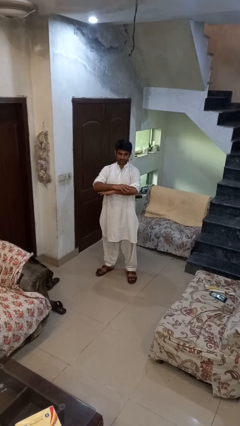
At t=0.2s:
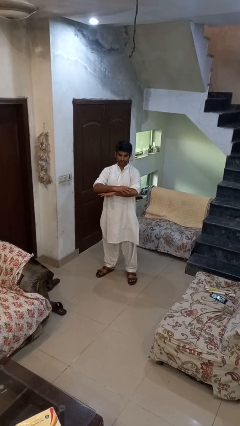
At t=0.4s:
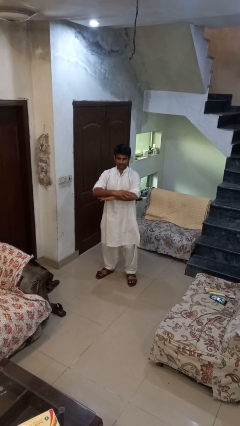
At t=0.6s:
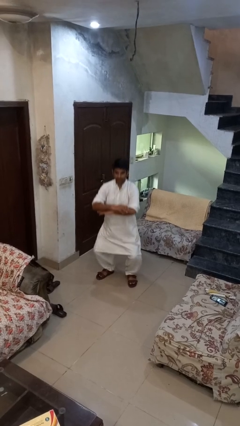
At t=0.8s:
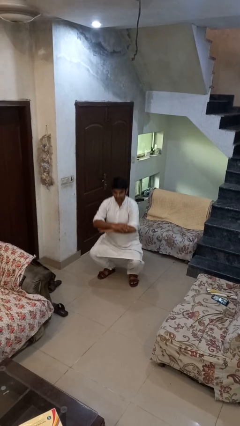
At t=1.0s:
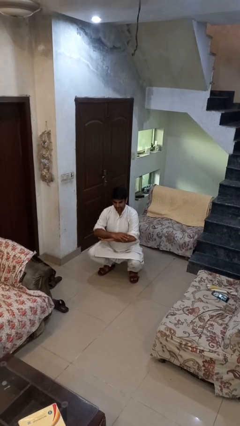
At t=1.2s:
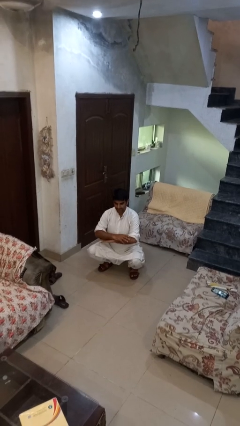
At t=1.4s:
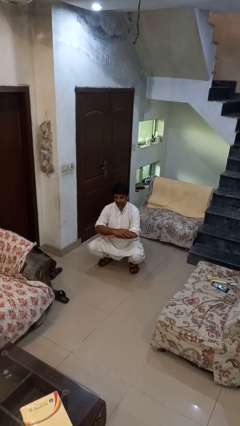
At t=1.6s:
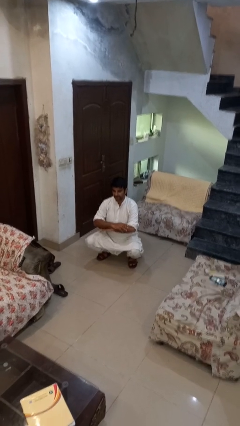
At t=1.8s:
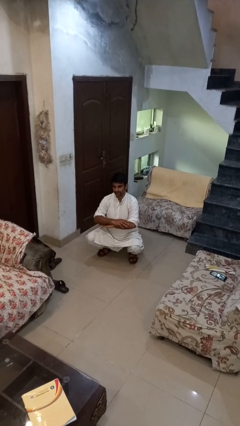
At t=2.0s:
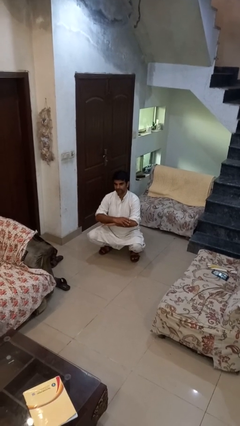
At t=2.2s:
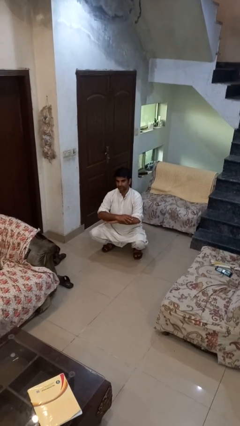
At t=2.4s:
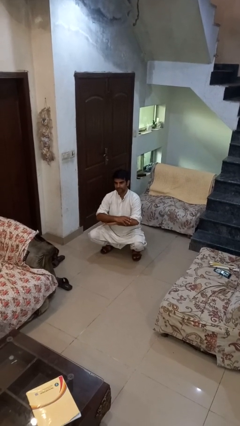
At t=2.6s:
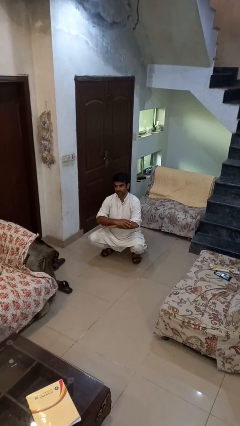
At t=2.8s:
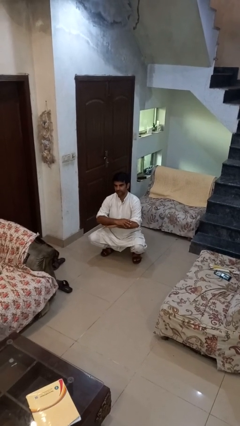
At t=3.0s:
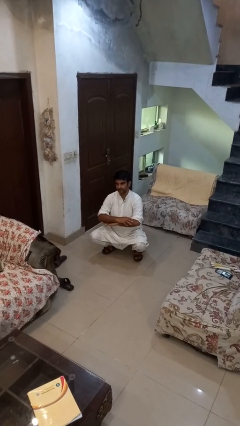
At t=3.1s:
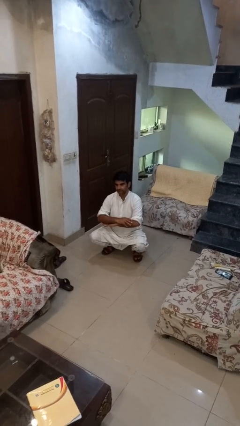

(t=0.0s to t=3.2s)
person squats

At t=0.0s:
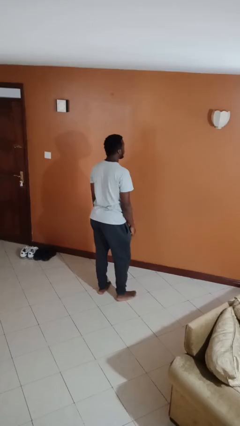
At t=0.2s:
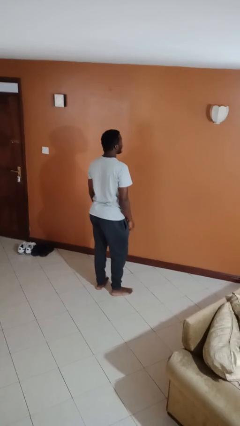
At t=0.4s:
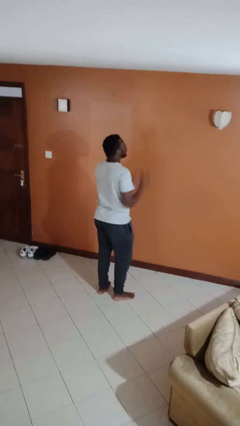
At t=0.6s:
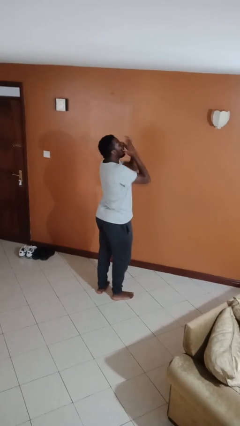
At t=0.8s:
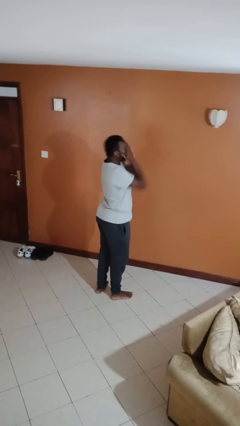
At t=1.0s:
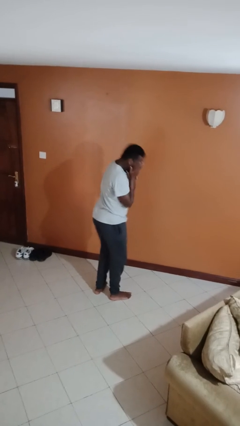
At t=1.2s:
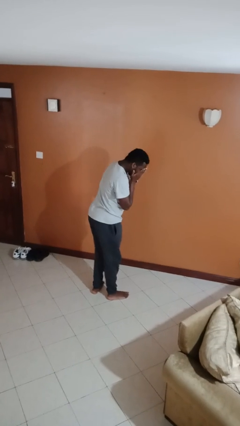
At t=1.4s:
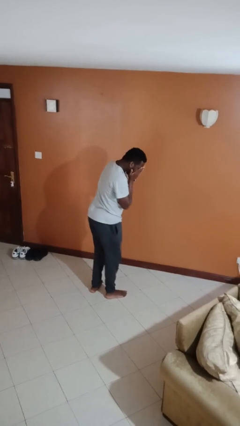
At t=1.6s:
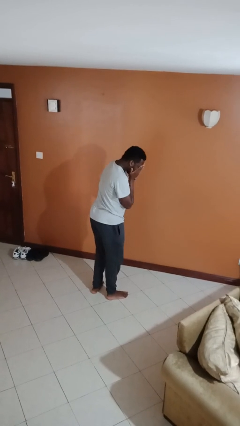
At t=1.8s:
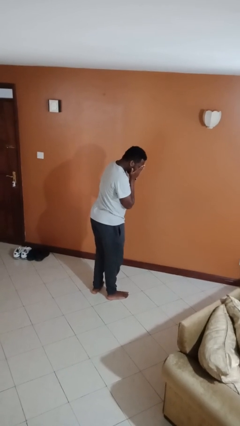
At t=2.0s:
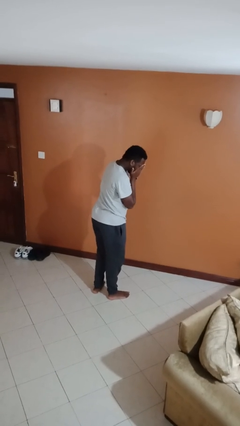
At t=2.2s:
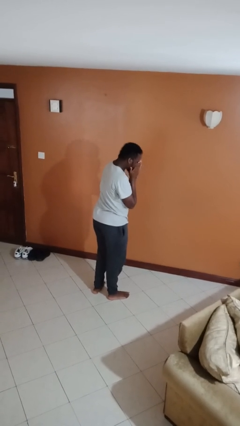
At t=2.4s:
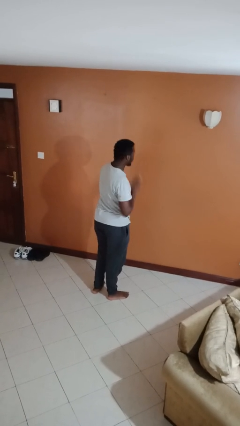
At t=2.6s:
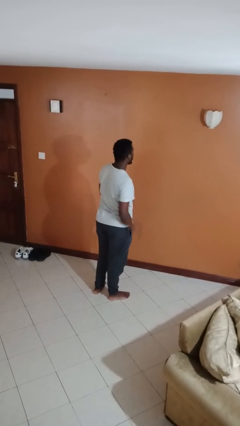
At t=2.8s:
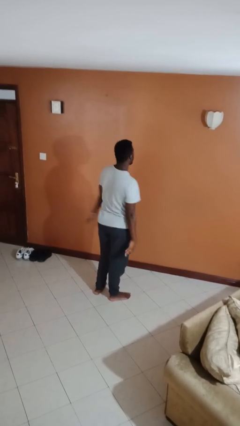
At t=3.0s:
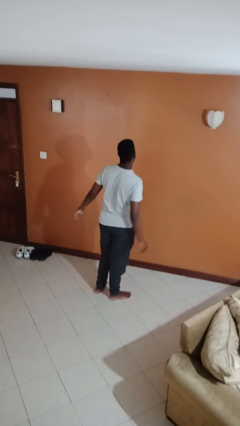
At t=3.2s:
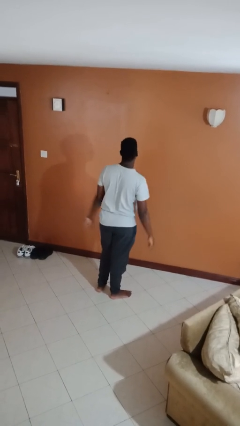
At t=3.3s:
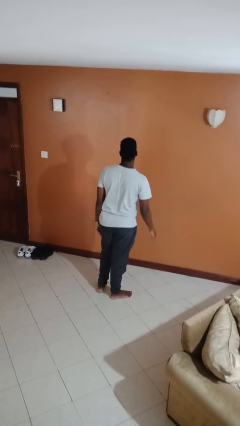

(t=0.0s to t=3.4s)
person sneezes into hand

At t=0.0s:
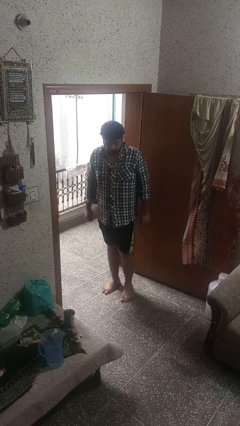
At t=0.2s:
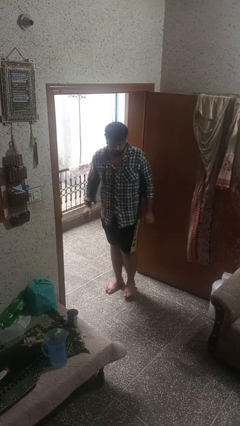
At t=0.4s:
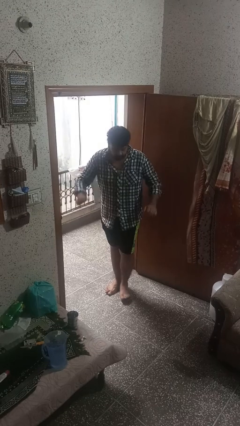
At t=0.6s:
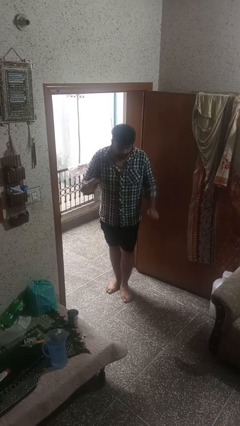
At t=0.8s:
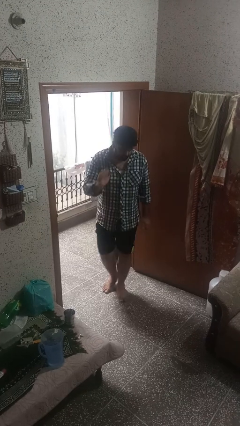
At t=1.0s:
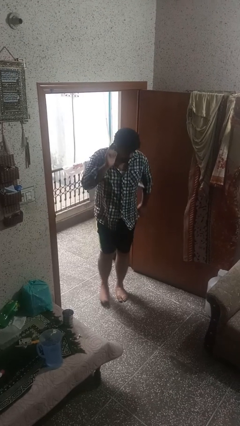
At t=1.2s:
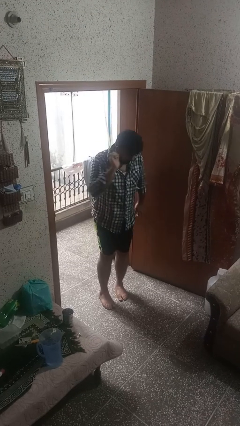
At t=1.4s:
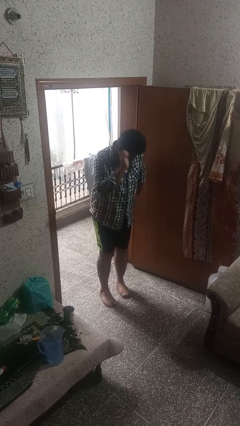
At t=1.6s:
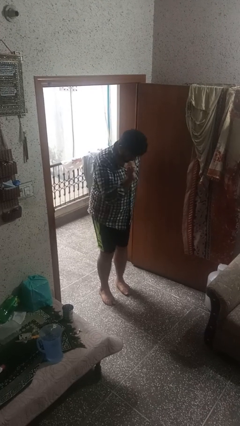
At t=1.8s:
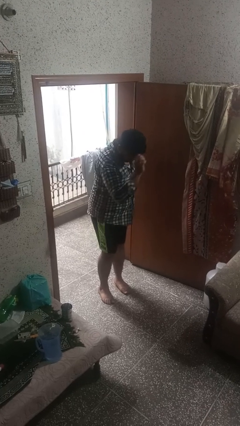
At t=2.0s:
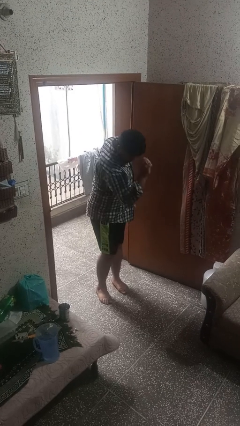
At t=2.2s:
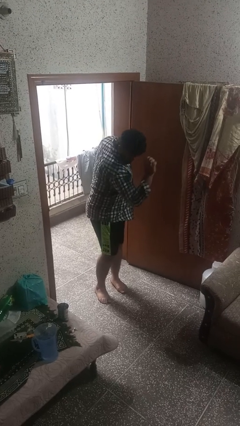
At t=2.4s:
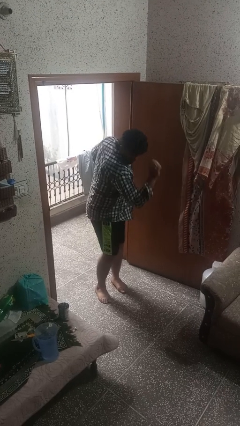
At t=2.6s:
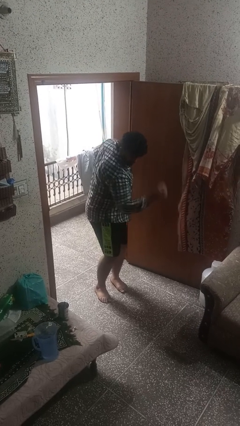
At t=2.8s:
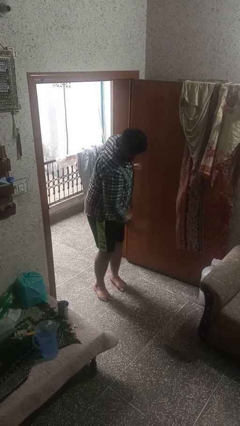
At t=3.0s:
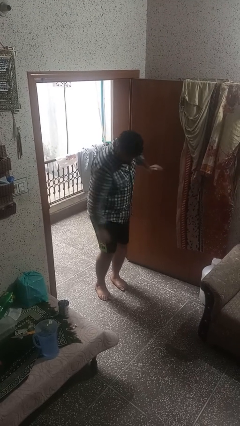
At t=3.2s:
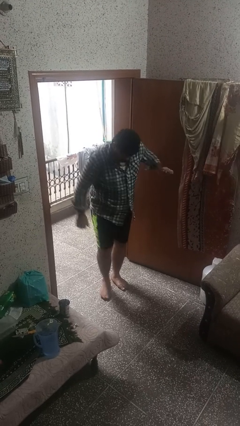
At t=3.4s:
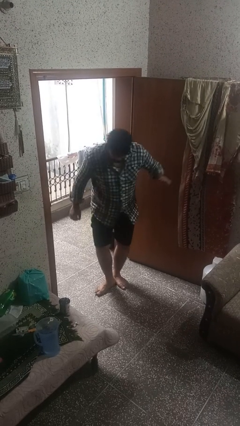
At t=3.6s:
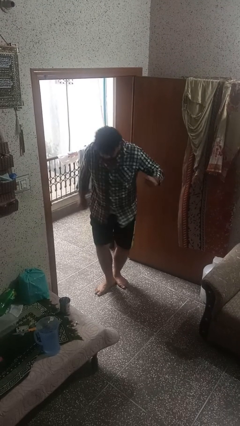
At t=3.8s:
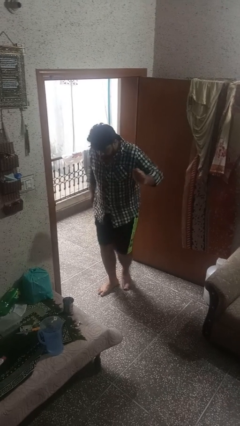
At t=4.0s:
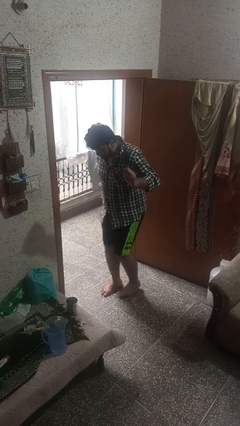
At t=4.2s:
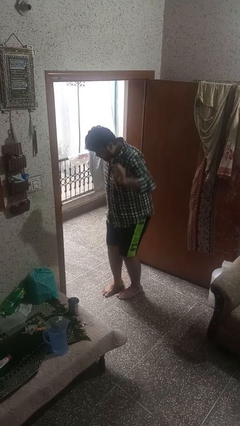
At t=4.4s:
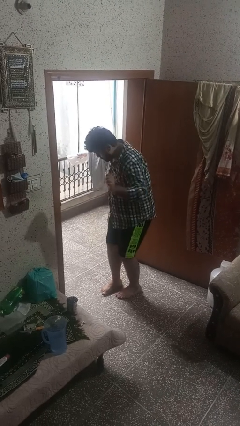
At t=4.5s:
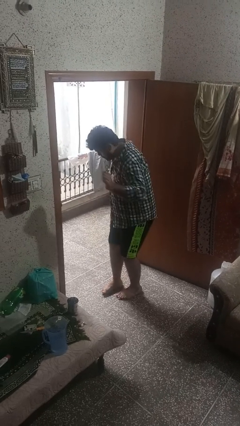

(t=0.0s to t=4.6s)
person dances in place

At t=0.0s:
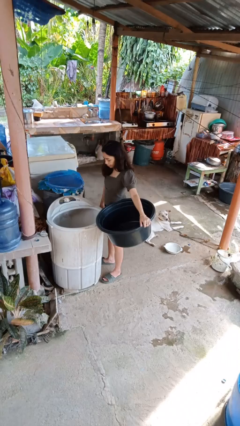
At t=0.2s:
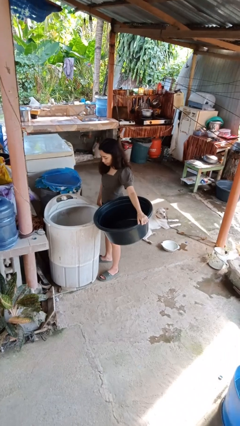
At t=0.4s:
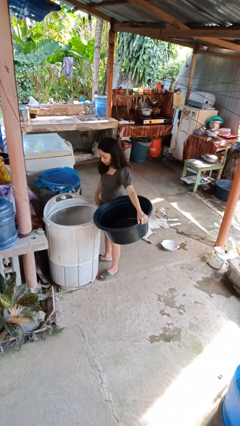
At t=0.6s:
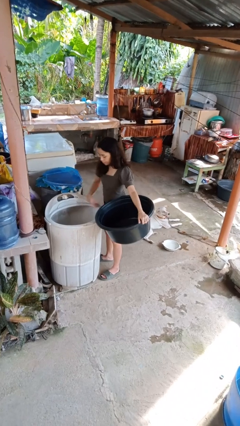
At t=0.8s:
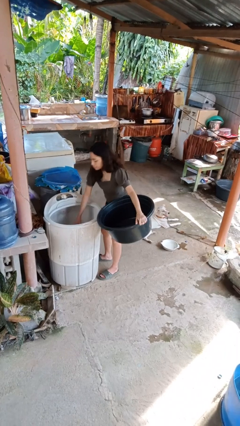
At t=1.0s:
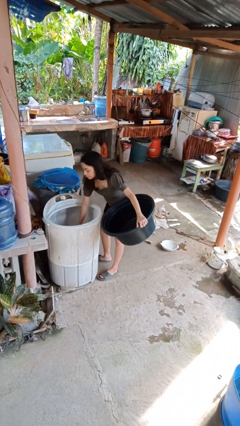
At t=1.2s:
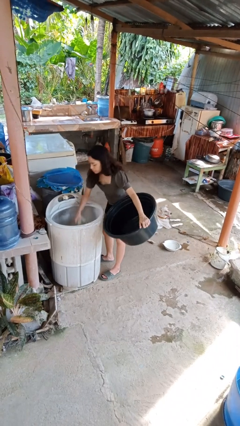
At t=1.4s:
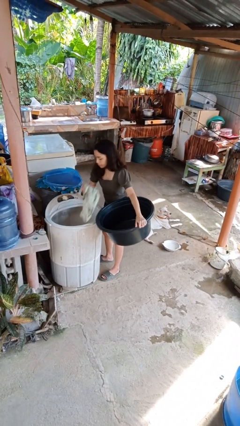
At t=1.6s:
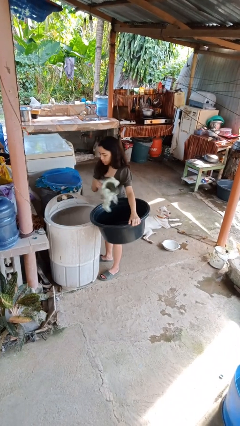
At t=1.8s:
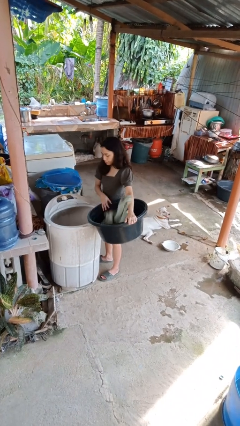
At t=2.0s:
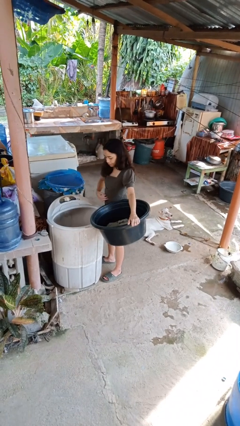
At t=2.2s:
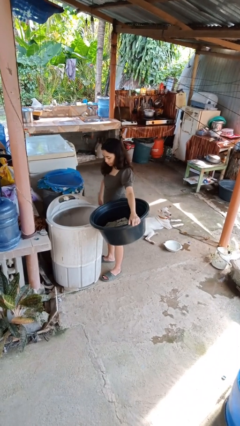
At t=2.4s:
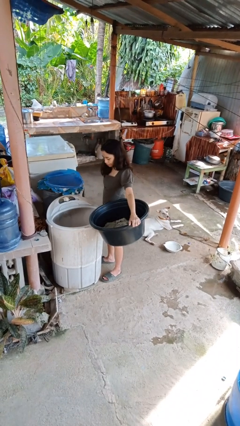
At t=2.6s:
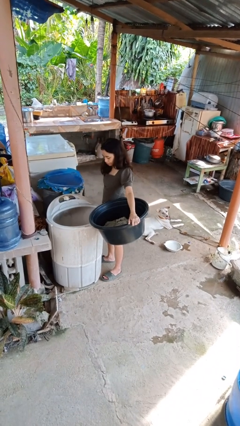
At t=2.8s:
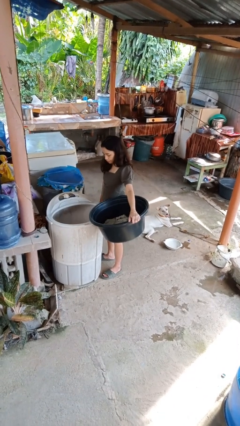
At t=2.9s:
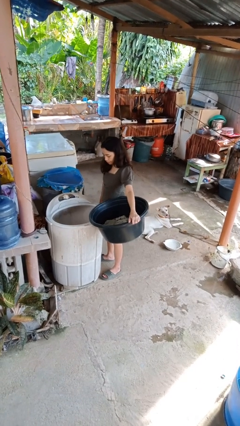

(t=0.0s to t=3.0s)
person unloads clotheswasher

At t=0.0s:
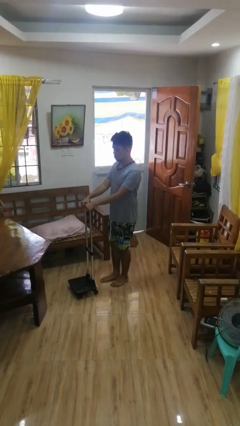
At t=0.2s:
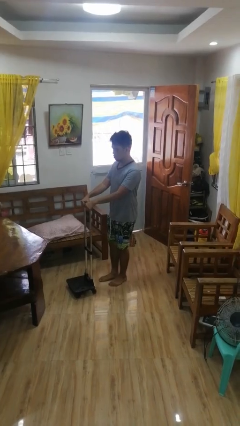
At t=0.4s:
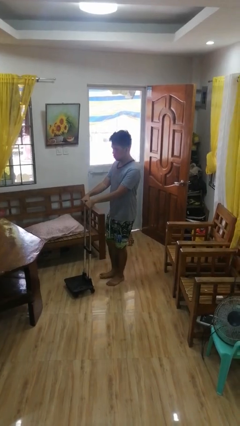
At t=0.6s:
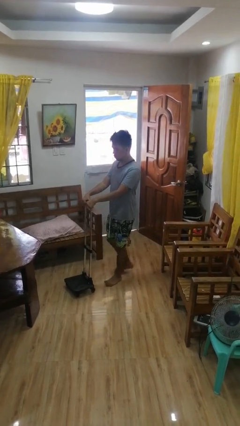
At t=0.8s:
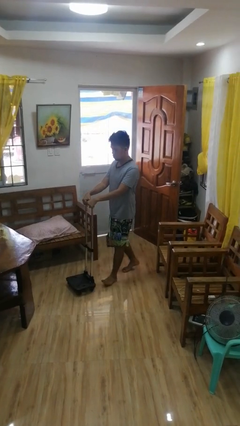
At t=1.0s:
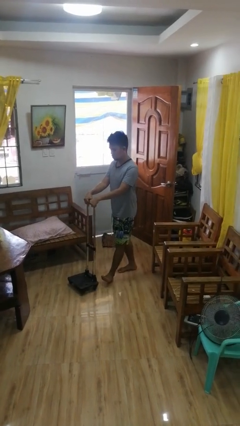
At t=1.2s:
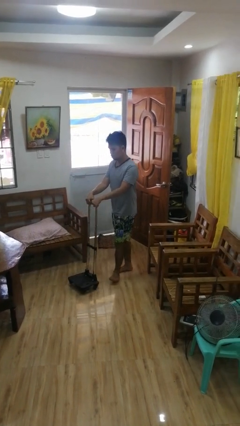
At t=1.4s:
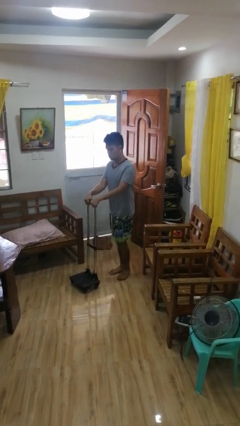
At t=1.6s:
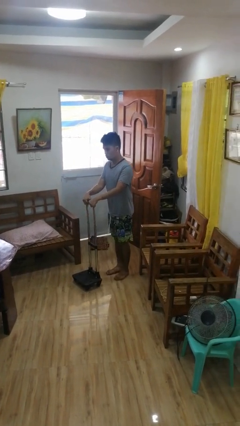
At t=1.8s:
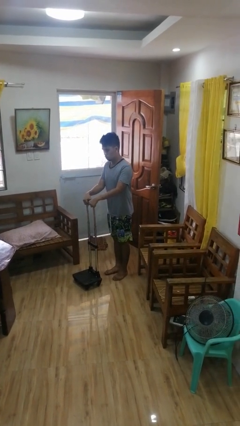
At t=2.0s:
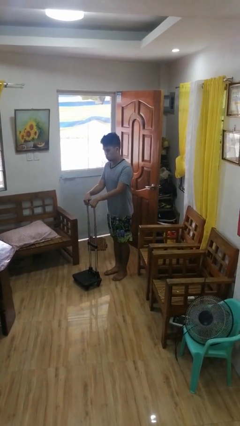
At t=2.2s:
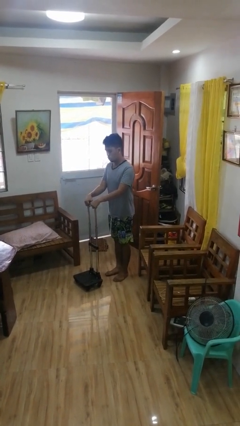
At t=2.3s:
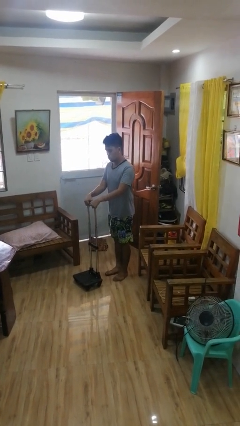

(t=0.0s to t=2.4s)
person pulls wheeled cart

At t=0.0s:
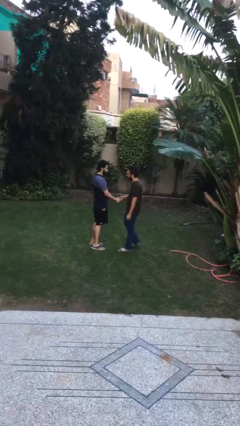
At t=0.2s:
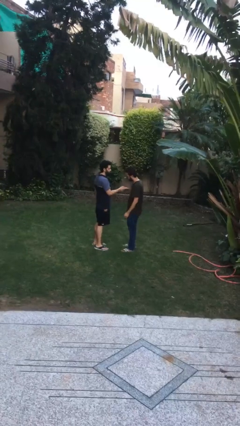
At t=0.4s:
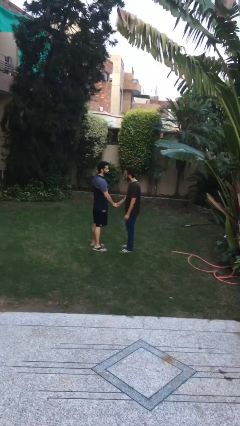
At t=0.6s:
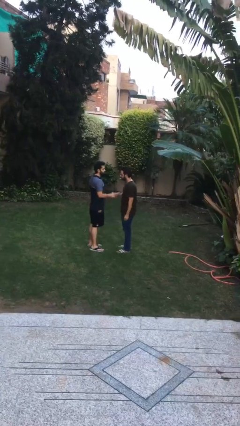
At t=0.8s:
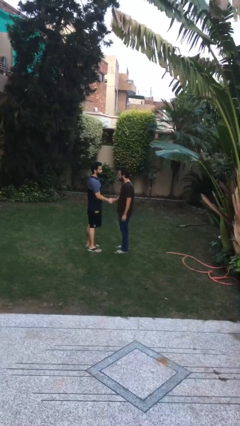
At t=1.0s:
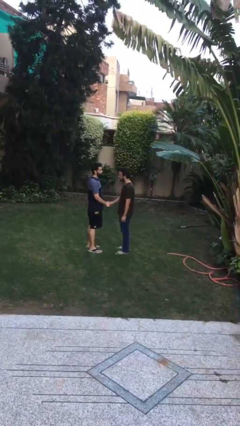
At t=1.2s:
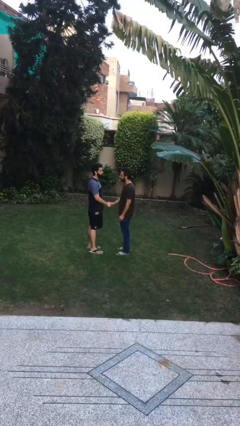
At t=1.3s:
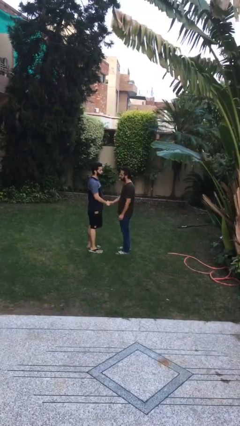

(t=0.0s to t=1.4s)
person shakes hand
